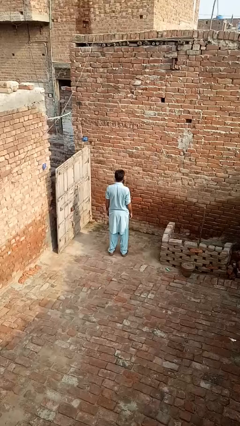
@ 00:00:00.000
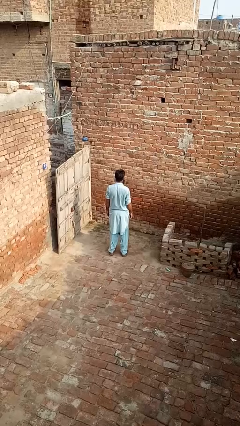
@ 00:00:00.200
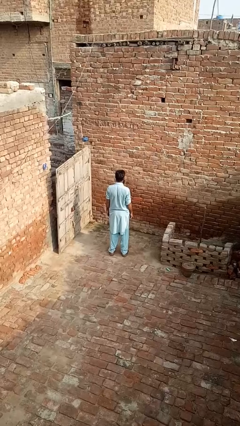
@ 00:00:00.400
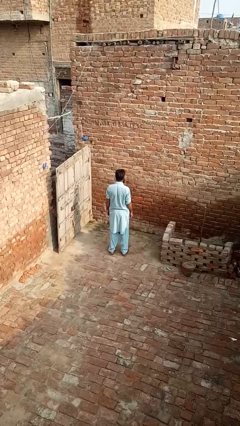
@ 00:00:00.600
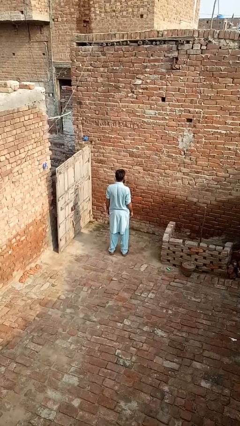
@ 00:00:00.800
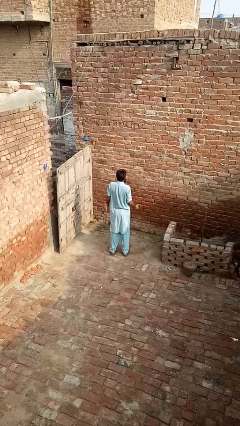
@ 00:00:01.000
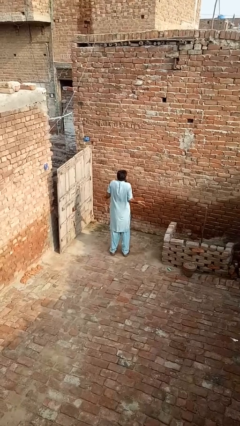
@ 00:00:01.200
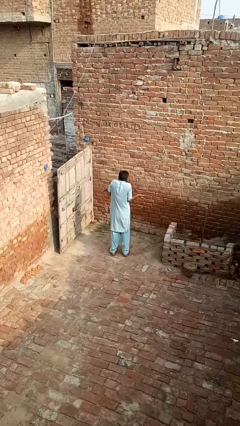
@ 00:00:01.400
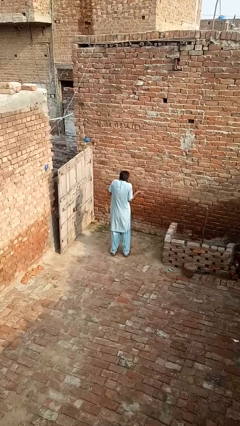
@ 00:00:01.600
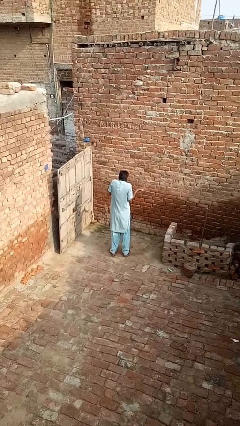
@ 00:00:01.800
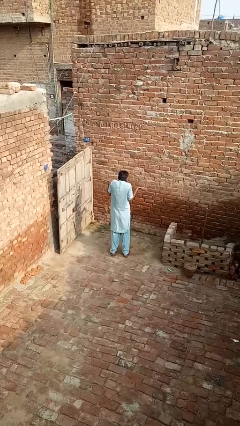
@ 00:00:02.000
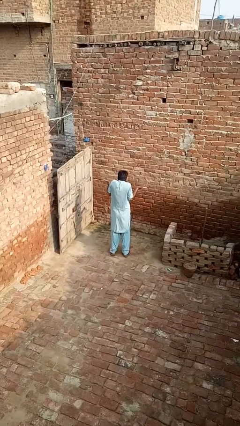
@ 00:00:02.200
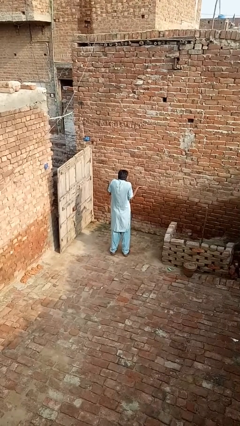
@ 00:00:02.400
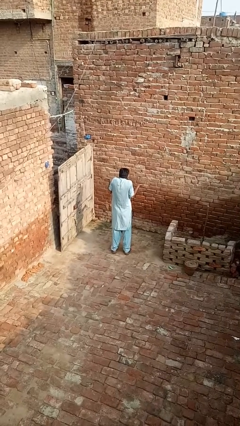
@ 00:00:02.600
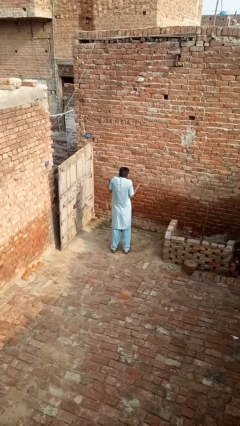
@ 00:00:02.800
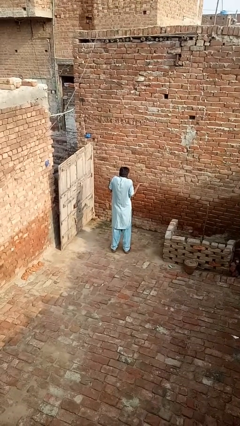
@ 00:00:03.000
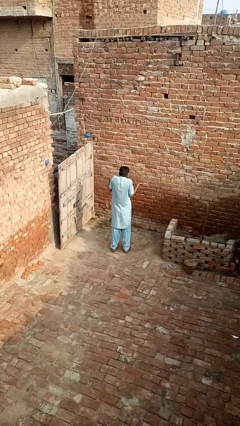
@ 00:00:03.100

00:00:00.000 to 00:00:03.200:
person shrugs

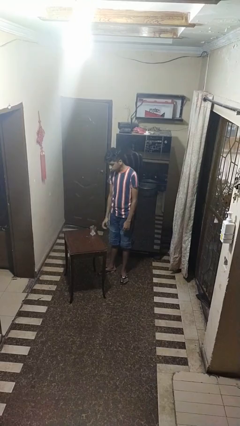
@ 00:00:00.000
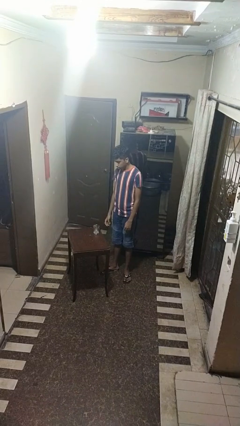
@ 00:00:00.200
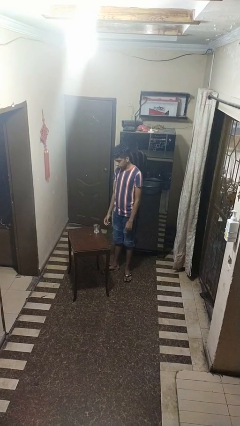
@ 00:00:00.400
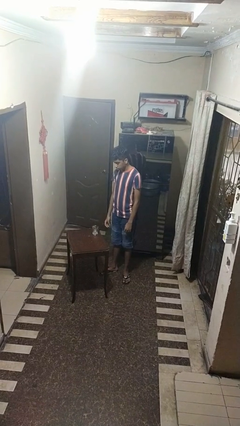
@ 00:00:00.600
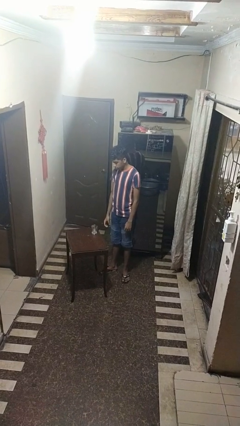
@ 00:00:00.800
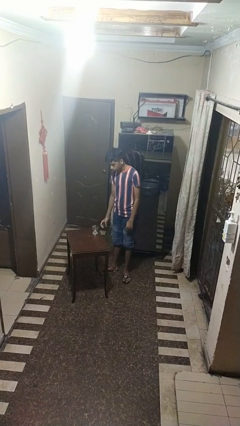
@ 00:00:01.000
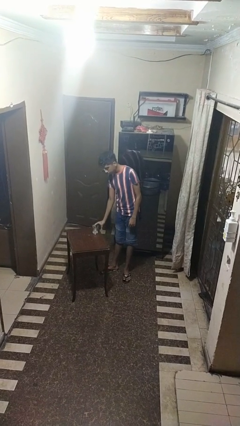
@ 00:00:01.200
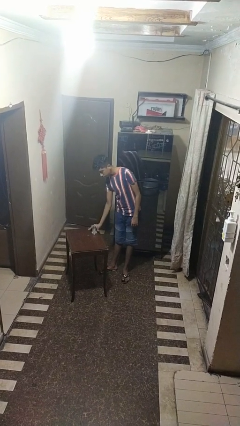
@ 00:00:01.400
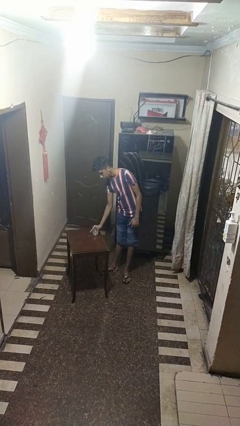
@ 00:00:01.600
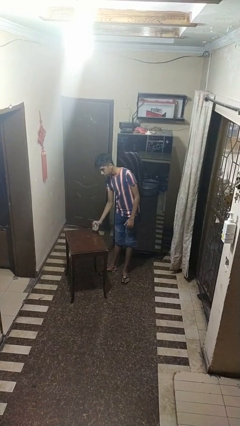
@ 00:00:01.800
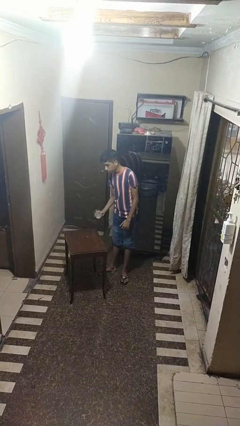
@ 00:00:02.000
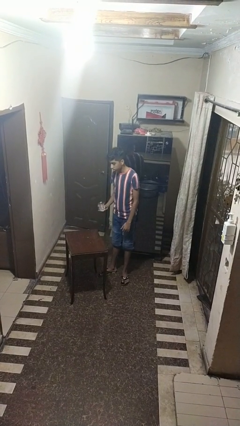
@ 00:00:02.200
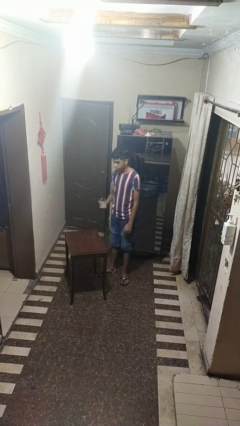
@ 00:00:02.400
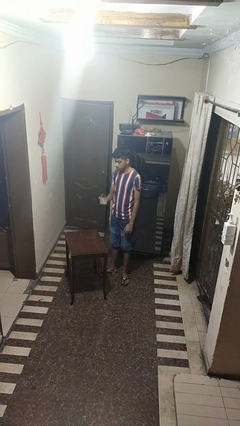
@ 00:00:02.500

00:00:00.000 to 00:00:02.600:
person picks up object from table

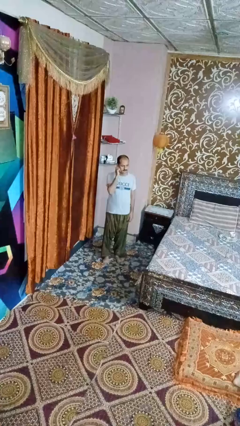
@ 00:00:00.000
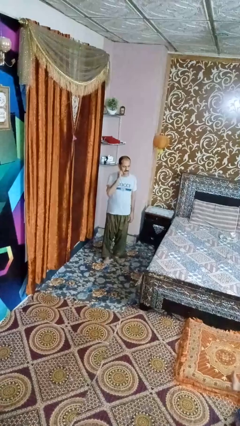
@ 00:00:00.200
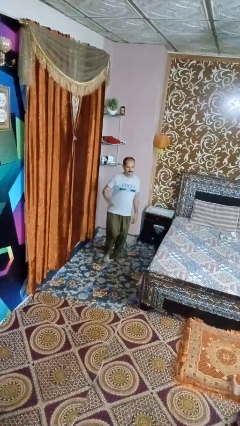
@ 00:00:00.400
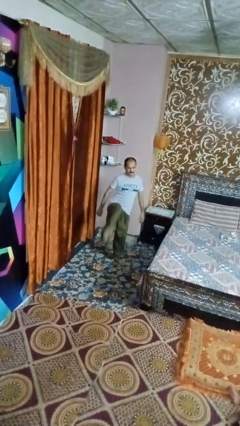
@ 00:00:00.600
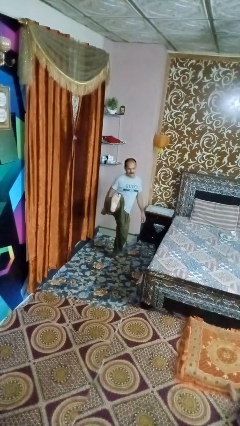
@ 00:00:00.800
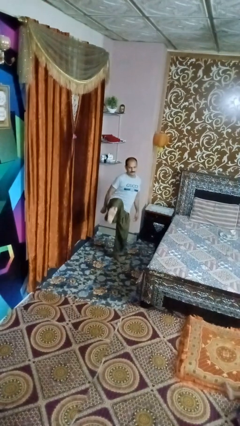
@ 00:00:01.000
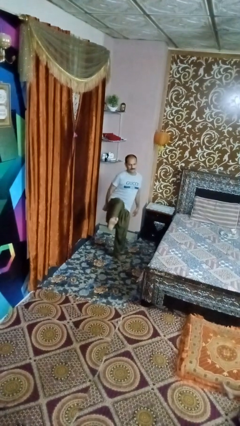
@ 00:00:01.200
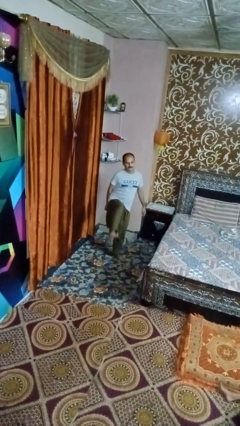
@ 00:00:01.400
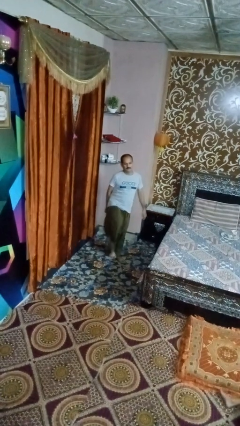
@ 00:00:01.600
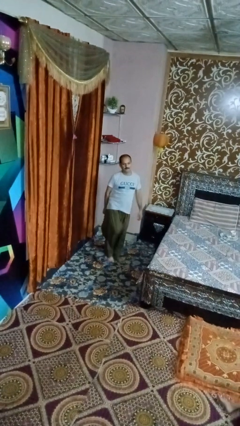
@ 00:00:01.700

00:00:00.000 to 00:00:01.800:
person karate kicks

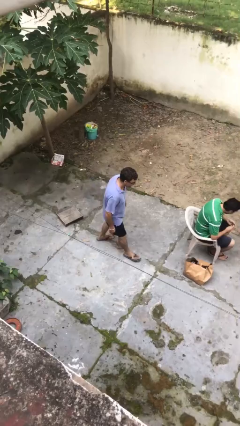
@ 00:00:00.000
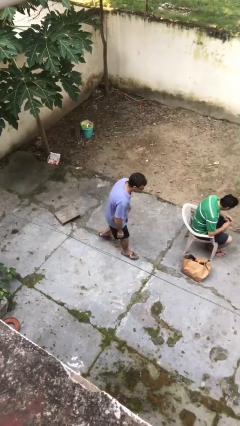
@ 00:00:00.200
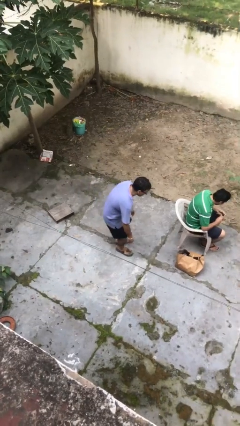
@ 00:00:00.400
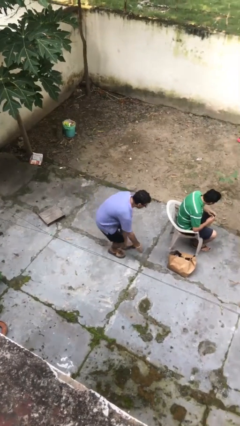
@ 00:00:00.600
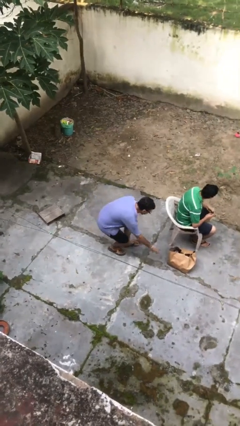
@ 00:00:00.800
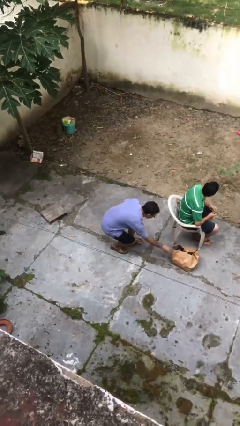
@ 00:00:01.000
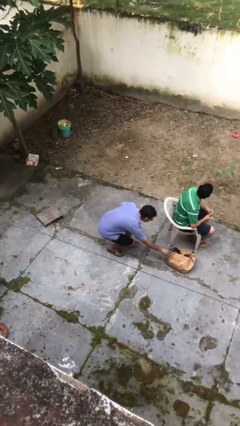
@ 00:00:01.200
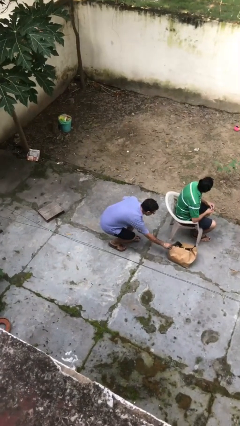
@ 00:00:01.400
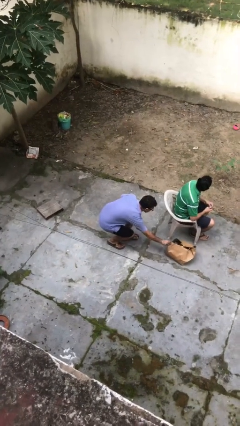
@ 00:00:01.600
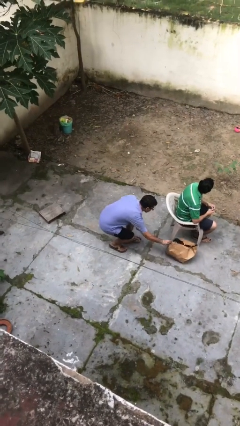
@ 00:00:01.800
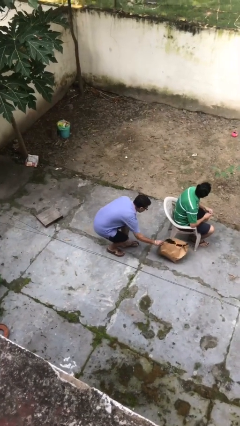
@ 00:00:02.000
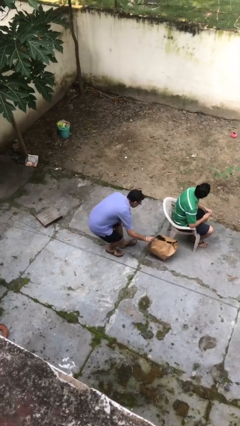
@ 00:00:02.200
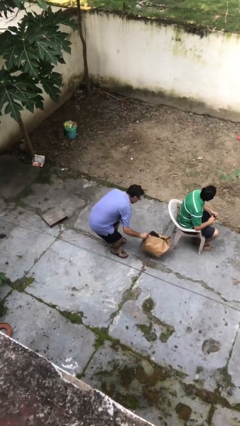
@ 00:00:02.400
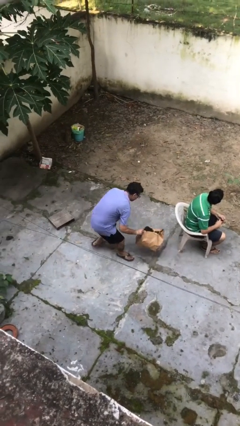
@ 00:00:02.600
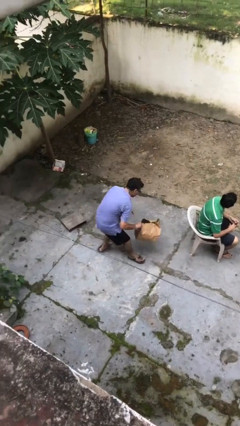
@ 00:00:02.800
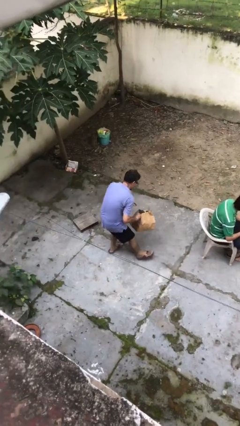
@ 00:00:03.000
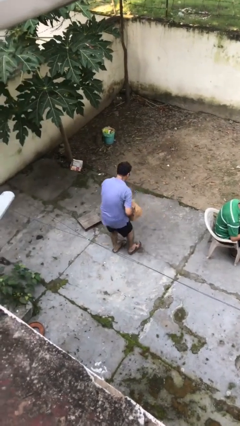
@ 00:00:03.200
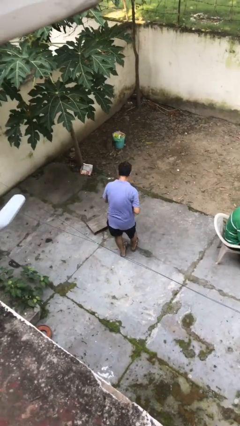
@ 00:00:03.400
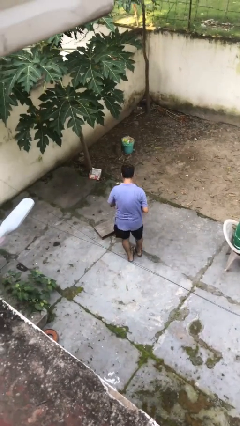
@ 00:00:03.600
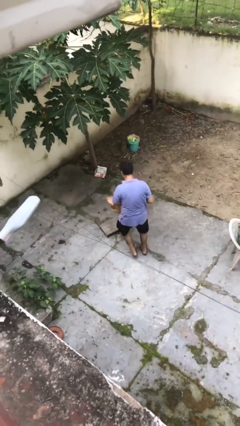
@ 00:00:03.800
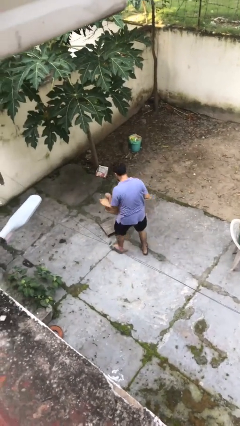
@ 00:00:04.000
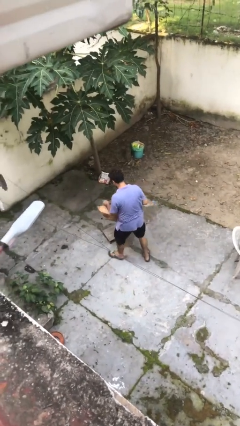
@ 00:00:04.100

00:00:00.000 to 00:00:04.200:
person steals object from person

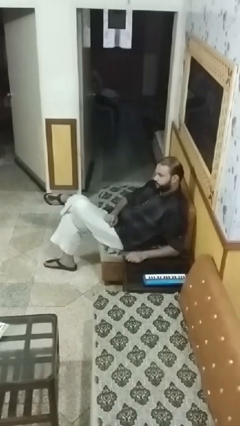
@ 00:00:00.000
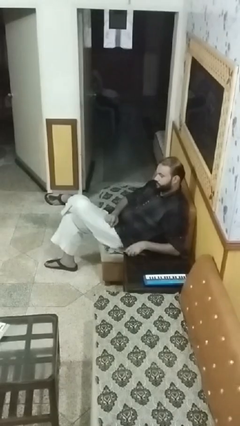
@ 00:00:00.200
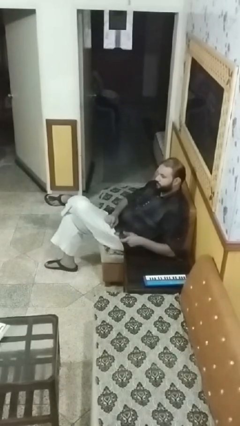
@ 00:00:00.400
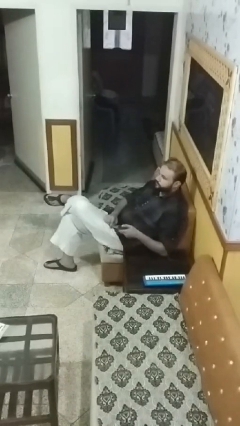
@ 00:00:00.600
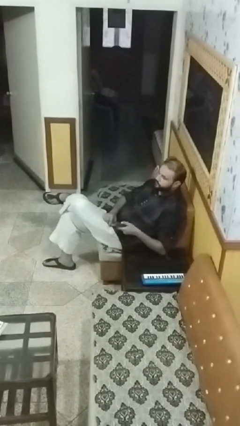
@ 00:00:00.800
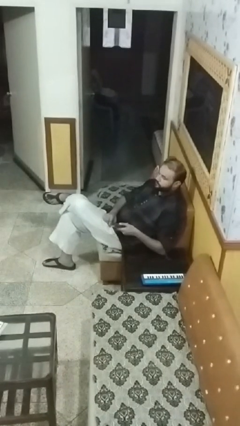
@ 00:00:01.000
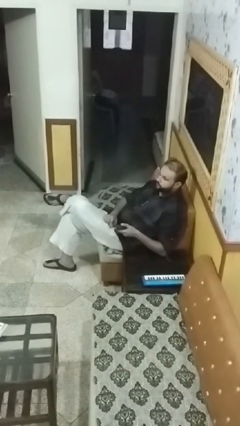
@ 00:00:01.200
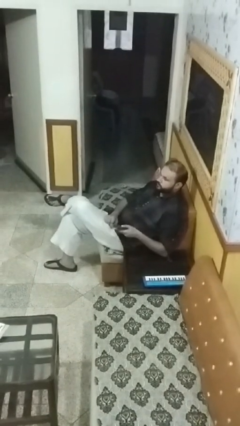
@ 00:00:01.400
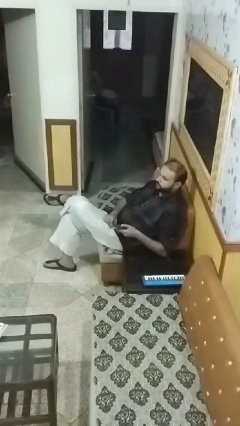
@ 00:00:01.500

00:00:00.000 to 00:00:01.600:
person uses television remote

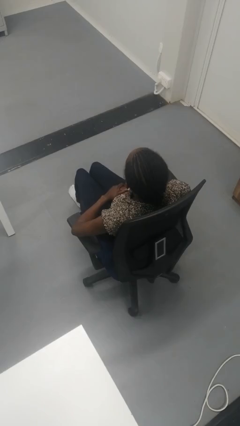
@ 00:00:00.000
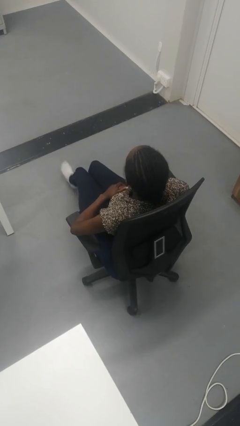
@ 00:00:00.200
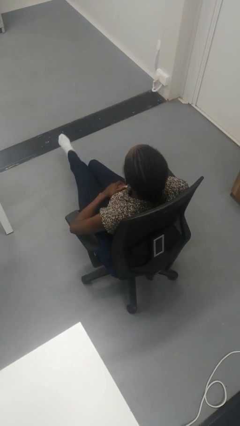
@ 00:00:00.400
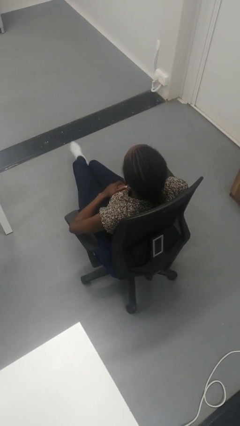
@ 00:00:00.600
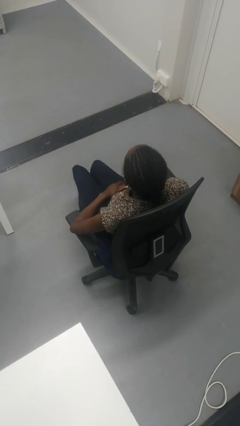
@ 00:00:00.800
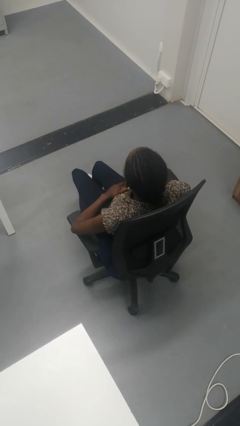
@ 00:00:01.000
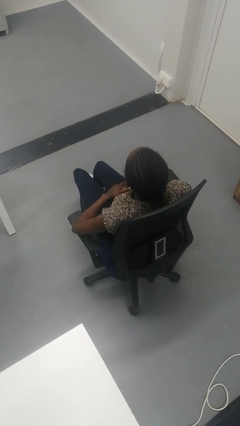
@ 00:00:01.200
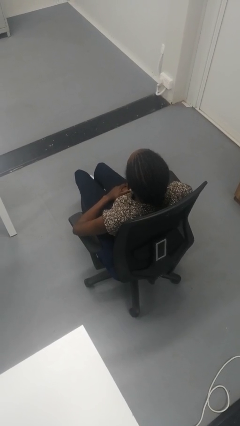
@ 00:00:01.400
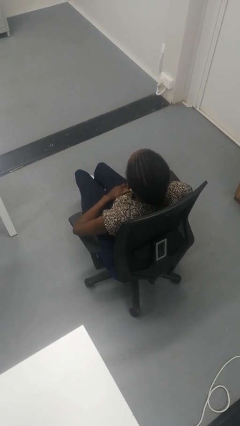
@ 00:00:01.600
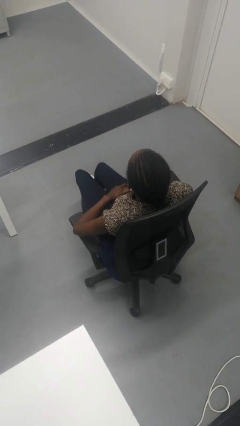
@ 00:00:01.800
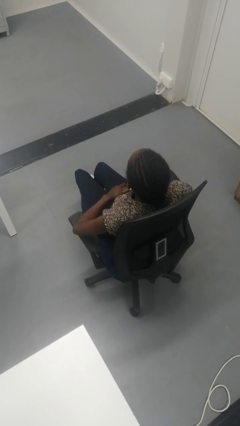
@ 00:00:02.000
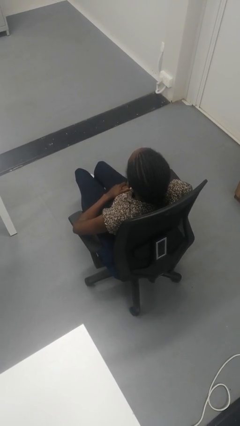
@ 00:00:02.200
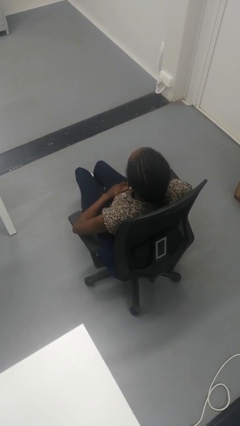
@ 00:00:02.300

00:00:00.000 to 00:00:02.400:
person crosses legs

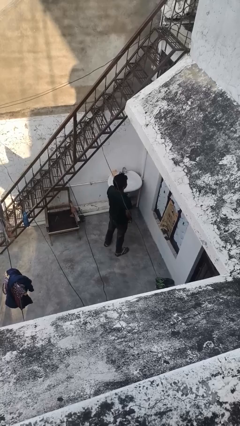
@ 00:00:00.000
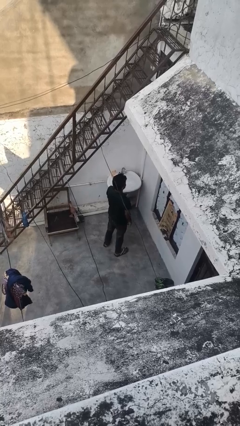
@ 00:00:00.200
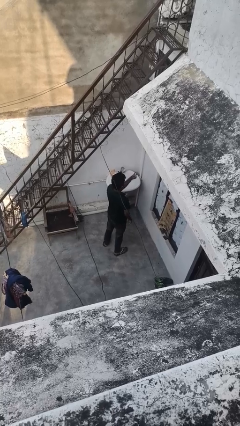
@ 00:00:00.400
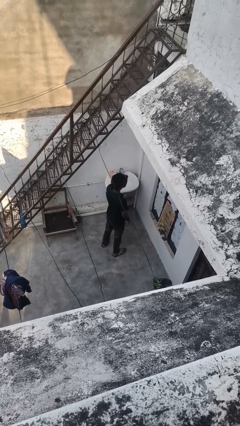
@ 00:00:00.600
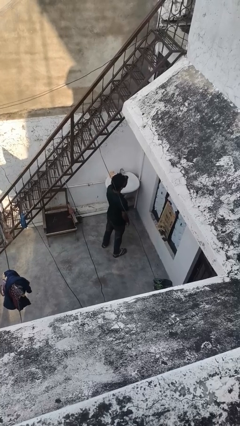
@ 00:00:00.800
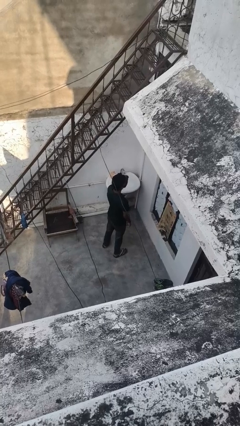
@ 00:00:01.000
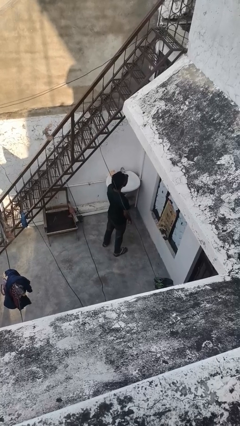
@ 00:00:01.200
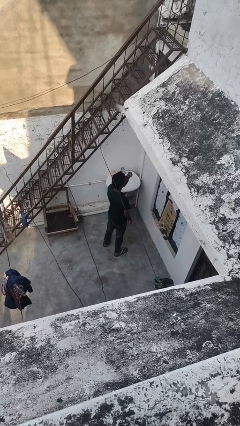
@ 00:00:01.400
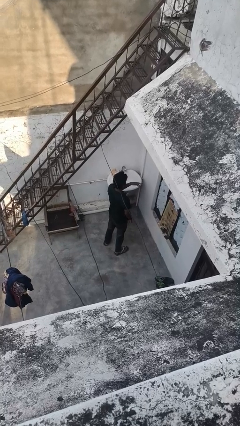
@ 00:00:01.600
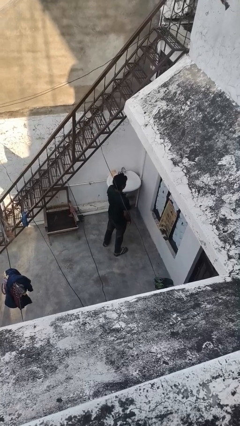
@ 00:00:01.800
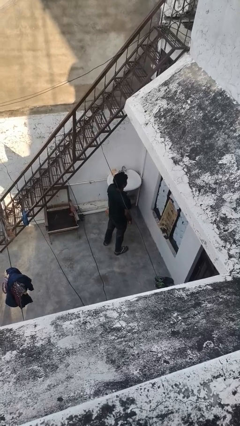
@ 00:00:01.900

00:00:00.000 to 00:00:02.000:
person gestures watch closely
